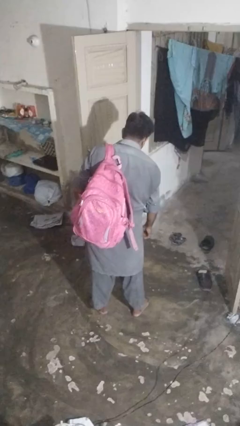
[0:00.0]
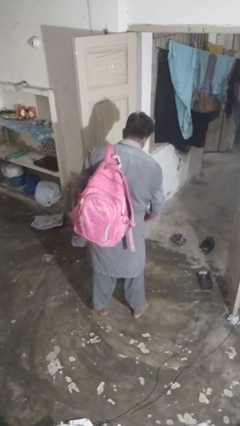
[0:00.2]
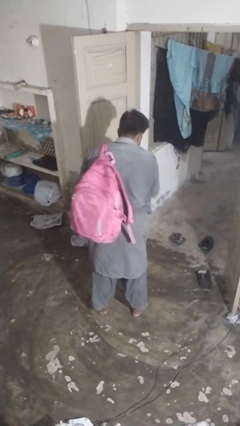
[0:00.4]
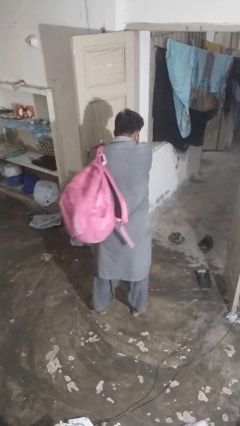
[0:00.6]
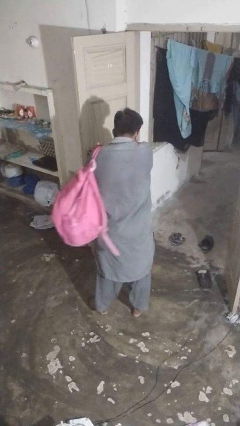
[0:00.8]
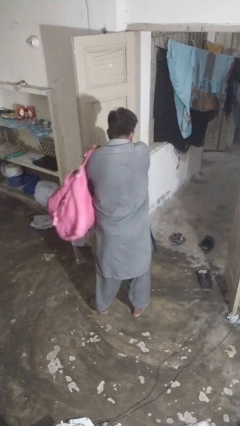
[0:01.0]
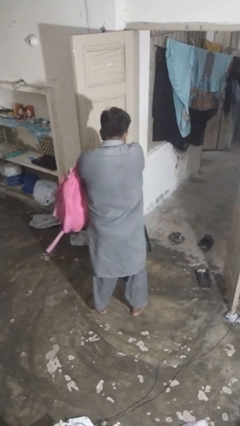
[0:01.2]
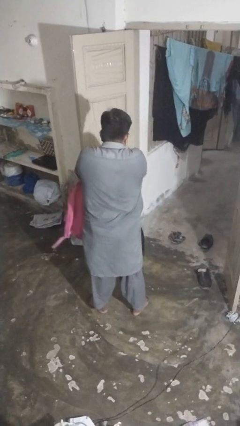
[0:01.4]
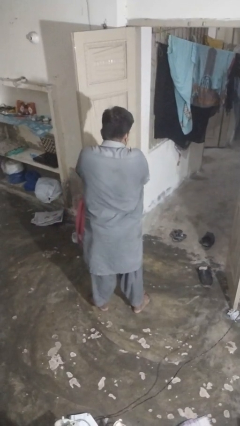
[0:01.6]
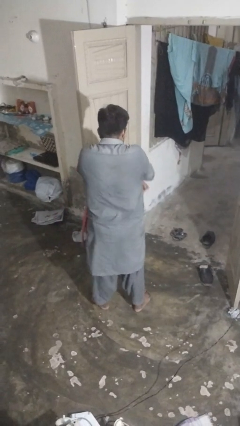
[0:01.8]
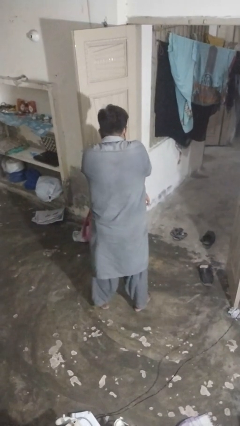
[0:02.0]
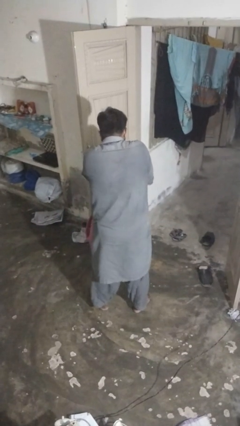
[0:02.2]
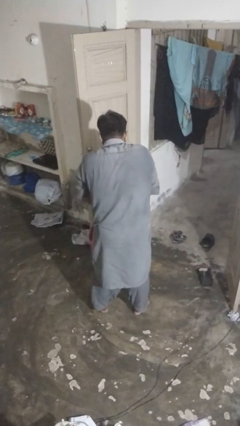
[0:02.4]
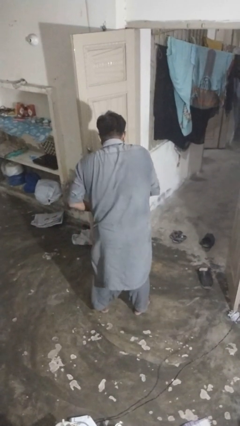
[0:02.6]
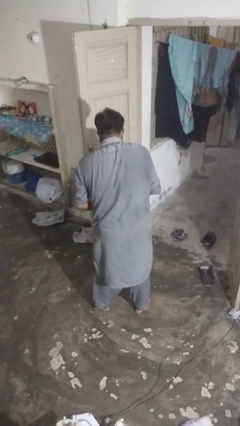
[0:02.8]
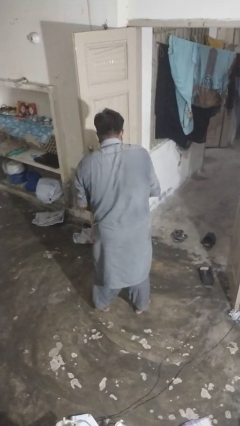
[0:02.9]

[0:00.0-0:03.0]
person takes off backpack

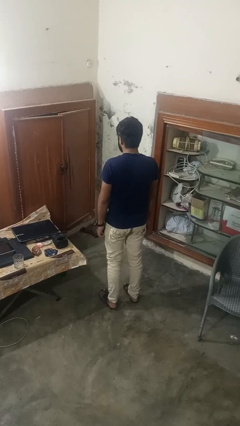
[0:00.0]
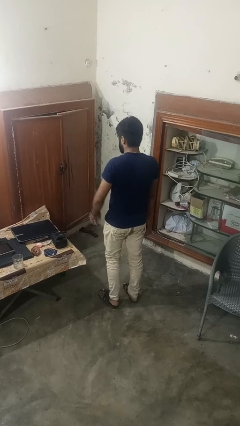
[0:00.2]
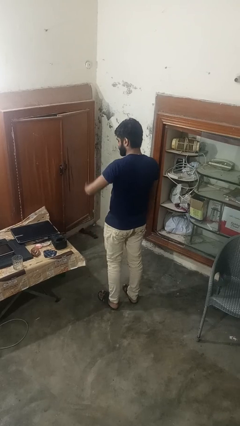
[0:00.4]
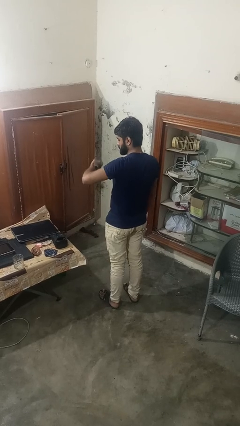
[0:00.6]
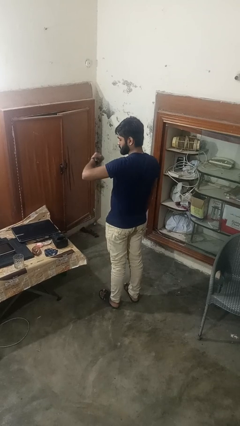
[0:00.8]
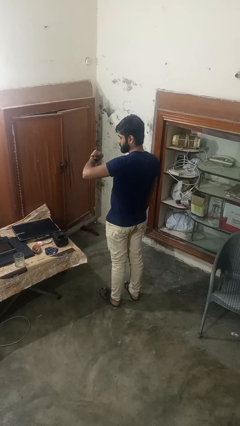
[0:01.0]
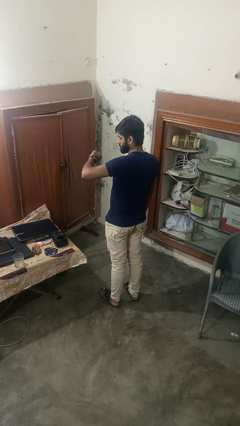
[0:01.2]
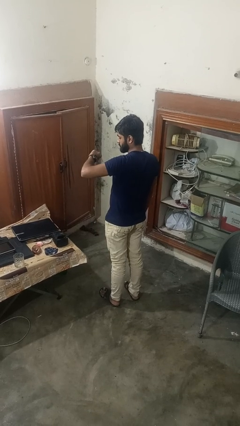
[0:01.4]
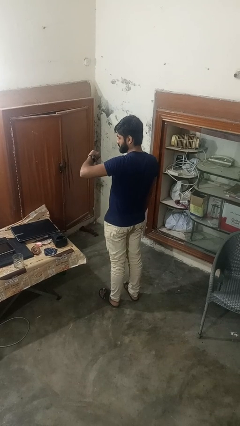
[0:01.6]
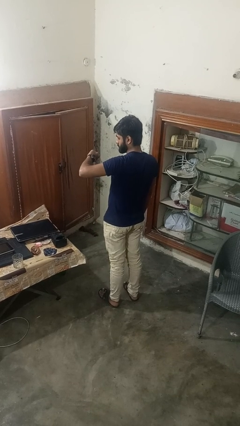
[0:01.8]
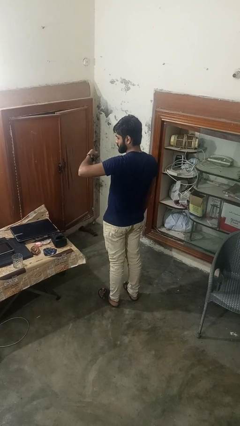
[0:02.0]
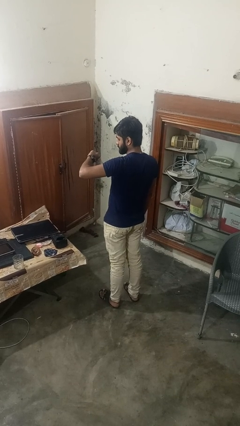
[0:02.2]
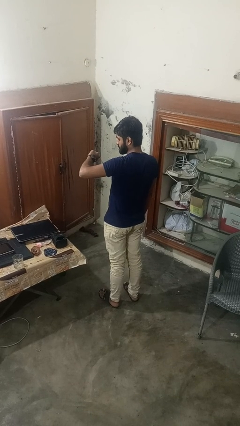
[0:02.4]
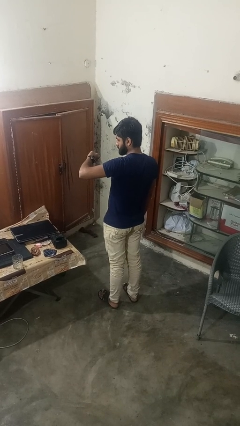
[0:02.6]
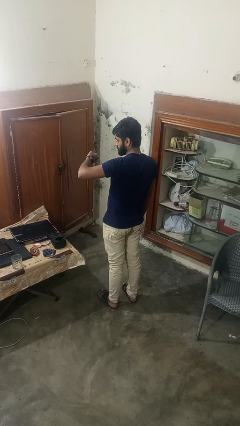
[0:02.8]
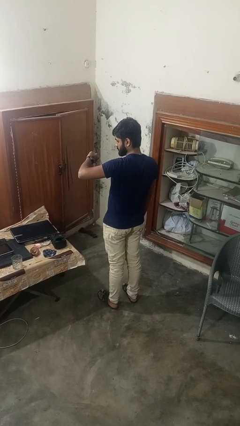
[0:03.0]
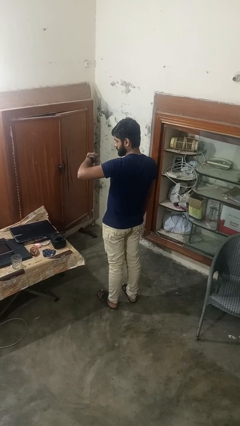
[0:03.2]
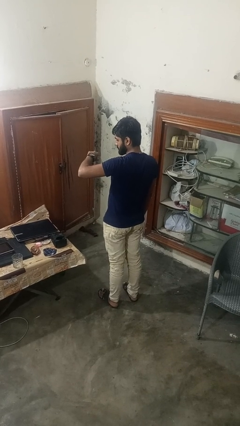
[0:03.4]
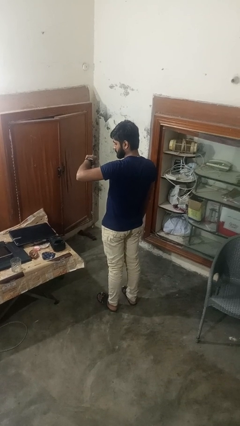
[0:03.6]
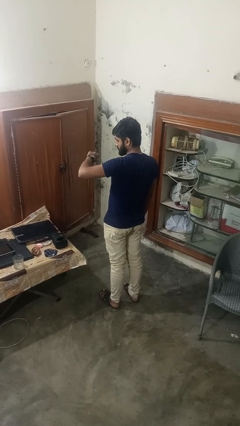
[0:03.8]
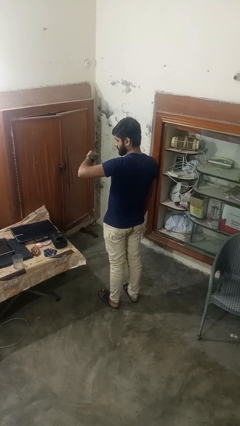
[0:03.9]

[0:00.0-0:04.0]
person looks at wristwatch

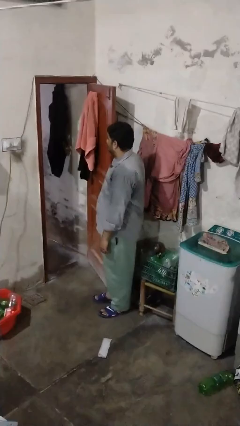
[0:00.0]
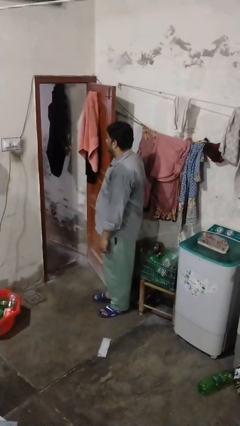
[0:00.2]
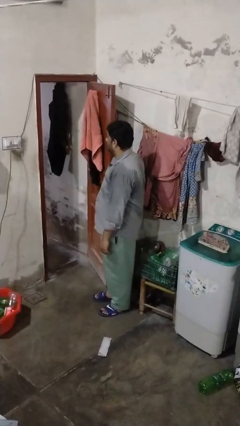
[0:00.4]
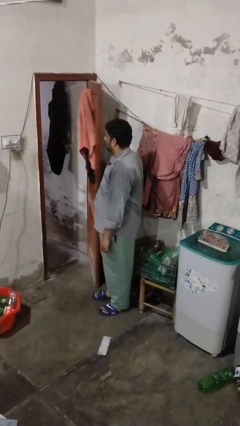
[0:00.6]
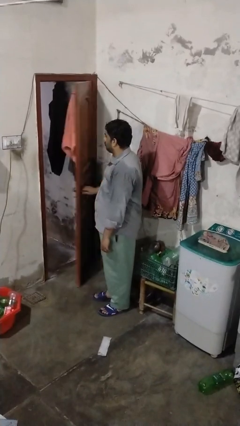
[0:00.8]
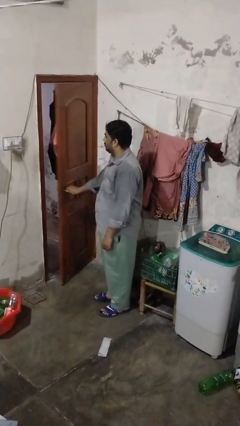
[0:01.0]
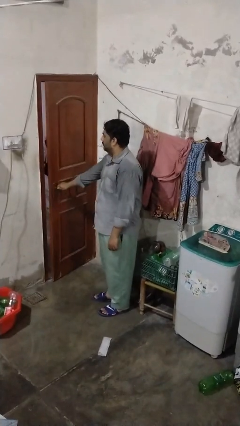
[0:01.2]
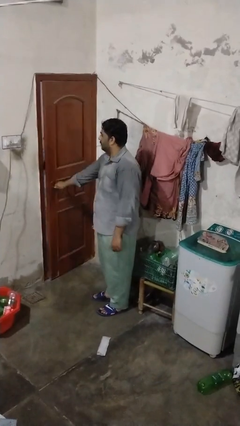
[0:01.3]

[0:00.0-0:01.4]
person closes closet door

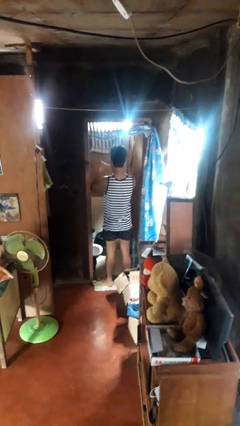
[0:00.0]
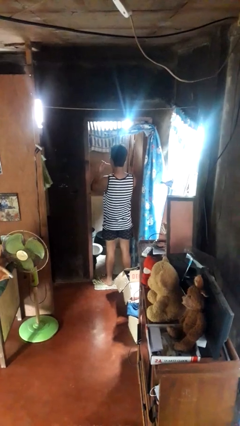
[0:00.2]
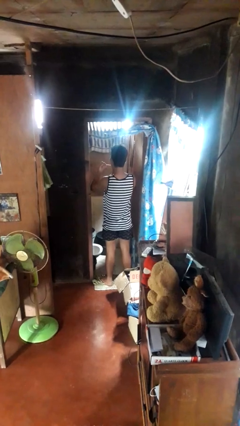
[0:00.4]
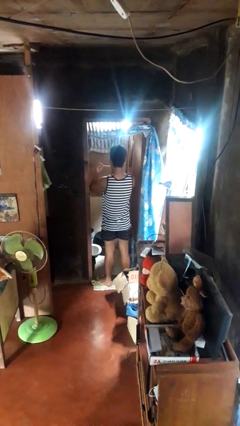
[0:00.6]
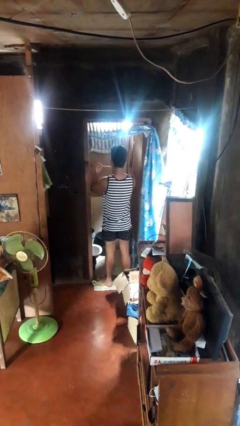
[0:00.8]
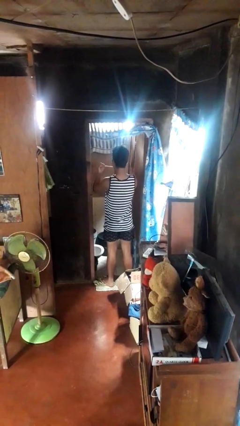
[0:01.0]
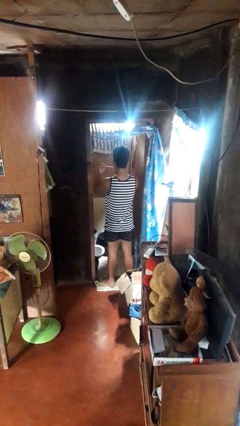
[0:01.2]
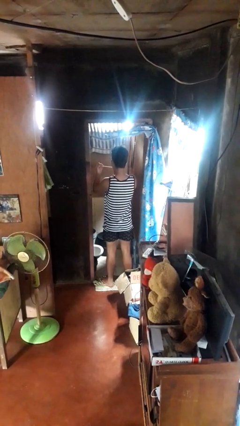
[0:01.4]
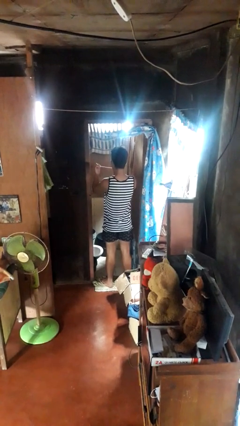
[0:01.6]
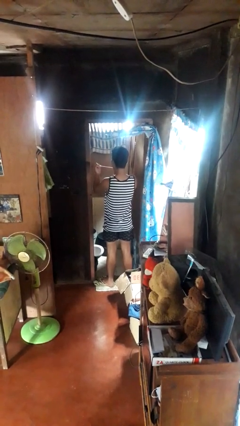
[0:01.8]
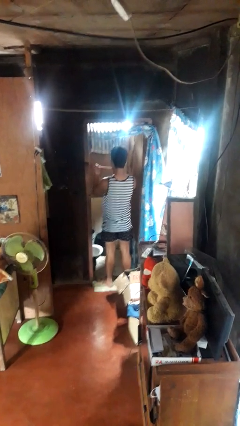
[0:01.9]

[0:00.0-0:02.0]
person flosses
